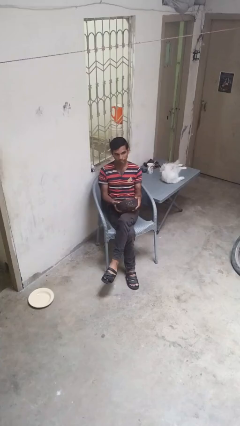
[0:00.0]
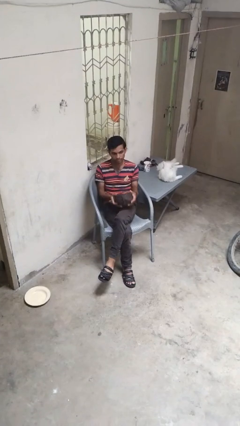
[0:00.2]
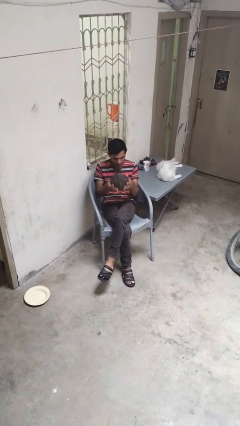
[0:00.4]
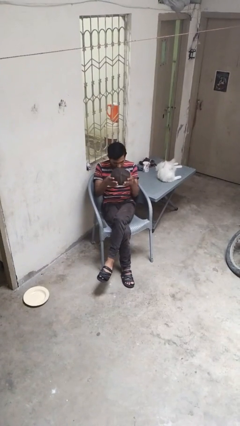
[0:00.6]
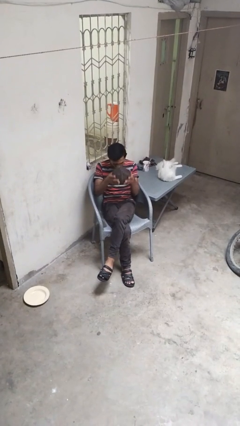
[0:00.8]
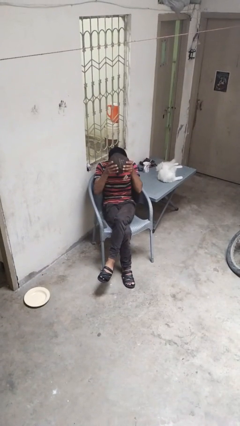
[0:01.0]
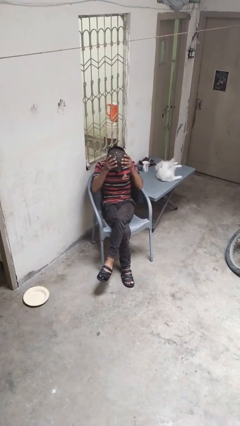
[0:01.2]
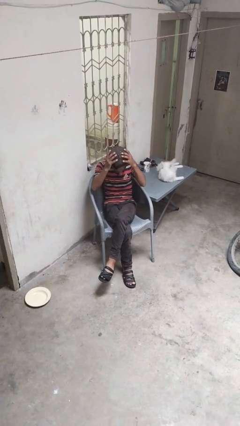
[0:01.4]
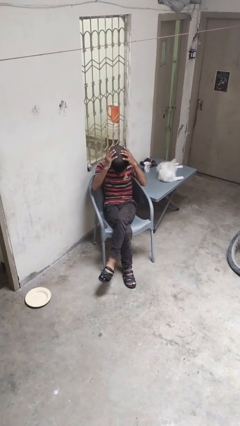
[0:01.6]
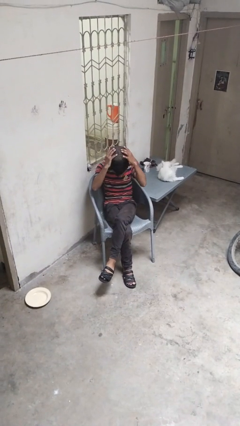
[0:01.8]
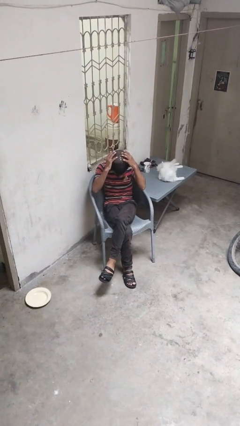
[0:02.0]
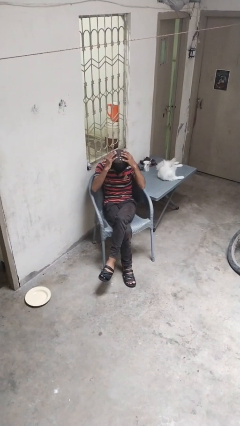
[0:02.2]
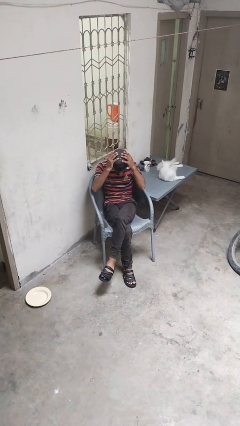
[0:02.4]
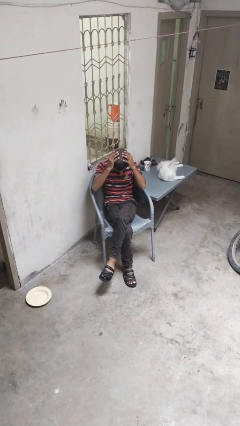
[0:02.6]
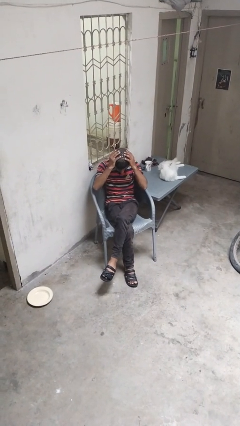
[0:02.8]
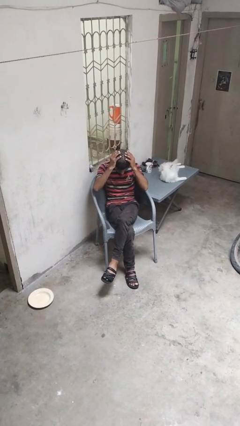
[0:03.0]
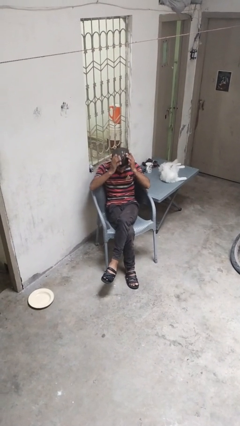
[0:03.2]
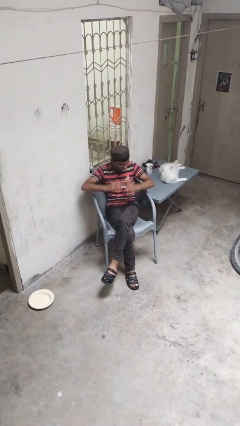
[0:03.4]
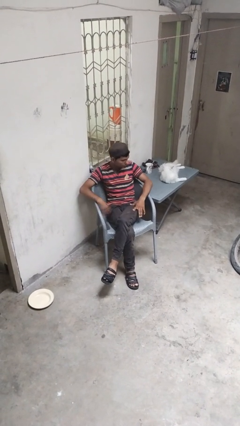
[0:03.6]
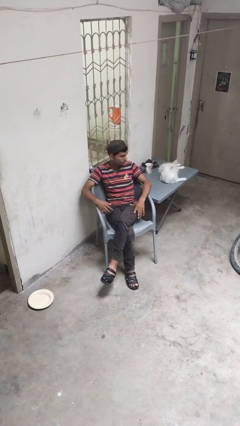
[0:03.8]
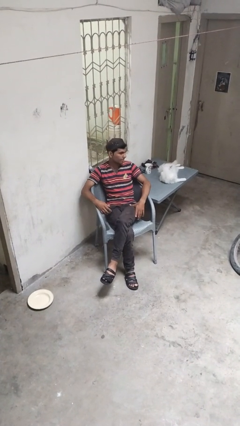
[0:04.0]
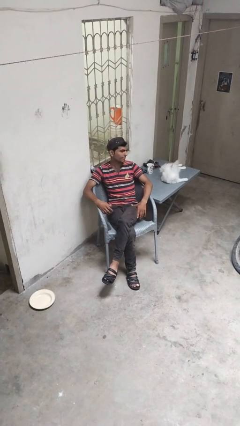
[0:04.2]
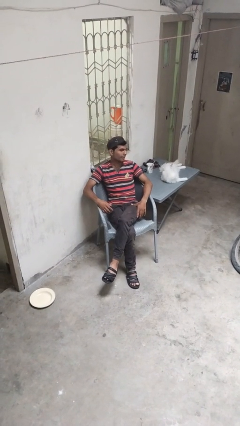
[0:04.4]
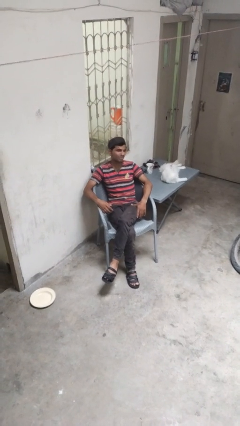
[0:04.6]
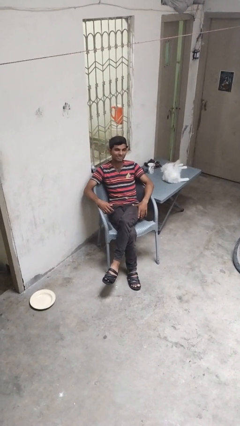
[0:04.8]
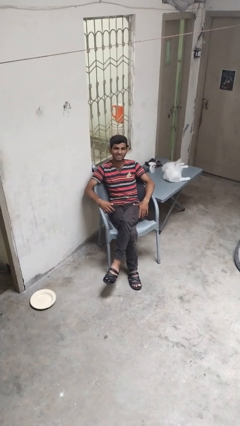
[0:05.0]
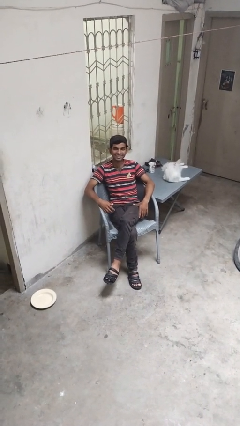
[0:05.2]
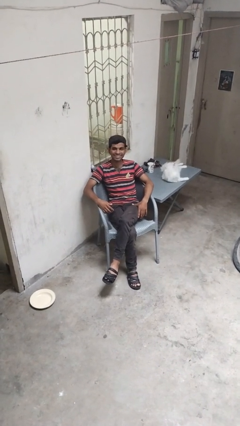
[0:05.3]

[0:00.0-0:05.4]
person puts on hat

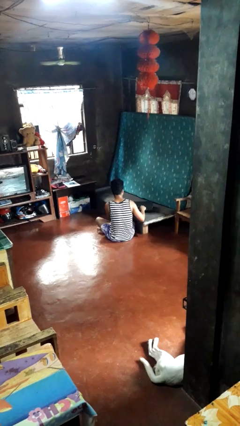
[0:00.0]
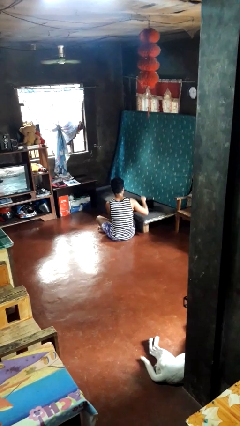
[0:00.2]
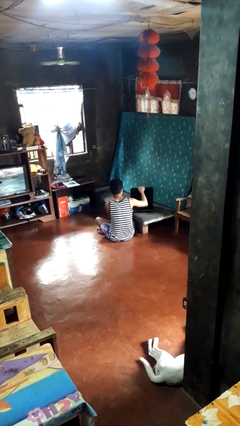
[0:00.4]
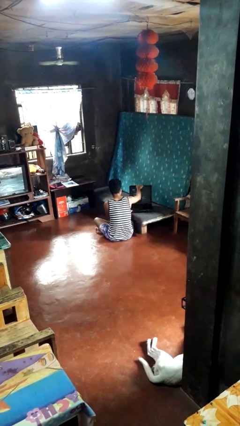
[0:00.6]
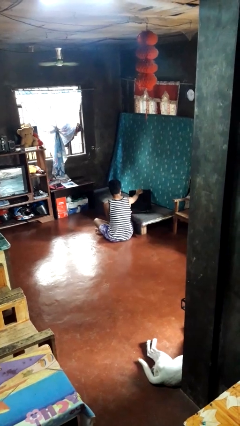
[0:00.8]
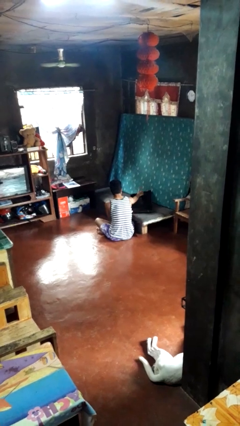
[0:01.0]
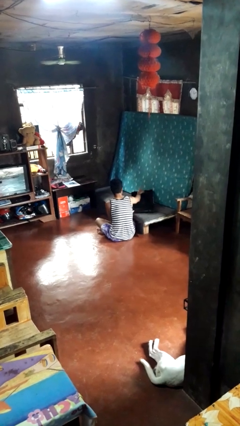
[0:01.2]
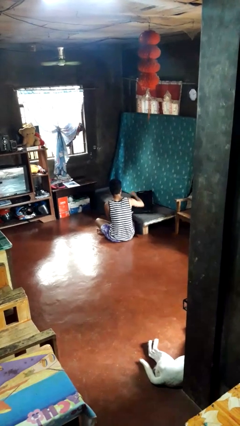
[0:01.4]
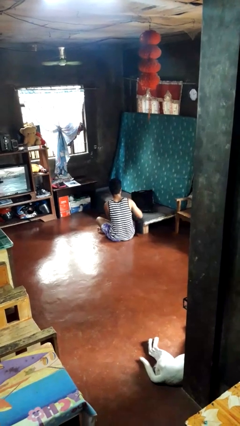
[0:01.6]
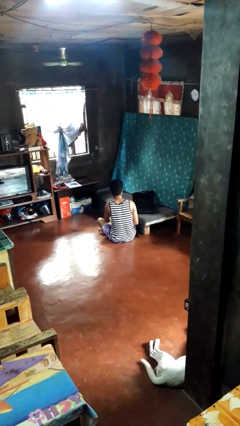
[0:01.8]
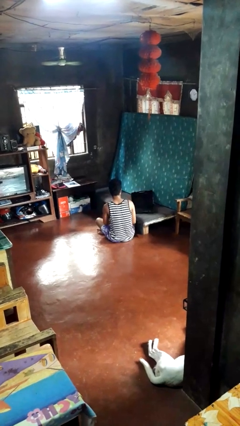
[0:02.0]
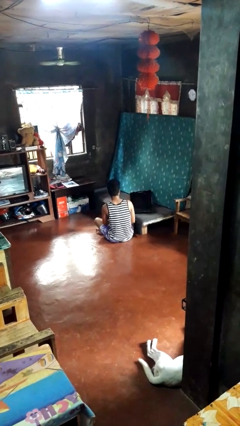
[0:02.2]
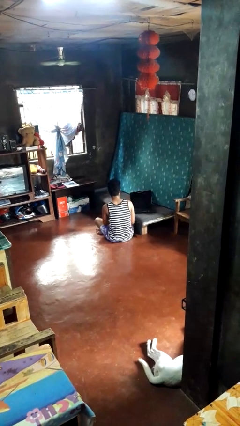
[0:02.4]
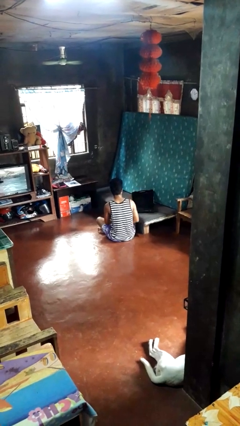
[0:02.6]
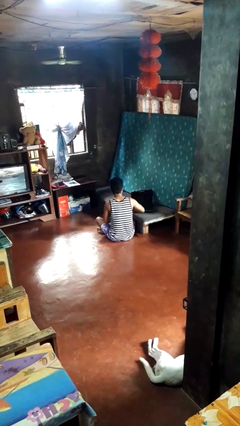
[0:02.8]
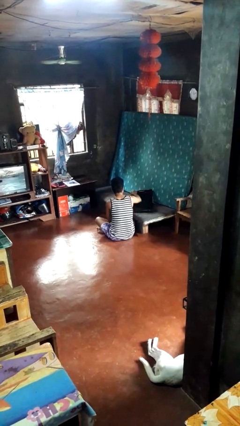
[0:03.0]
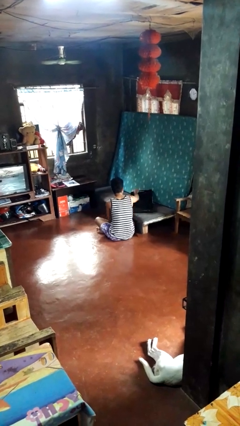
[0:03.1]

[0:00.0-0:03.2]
person opens suitcase

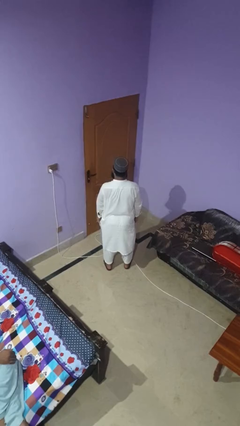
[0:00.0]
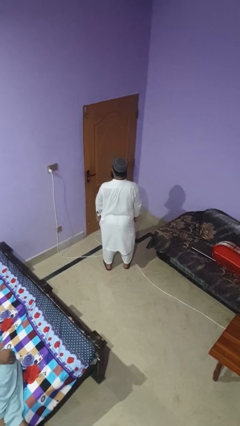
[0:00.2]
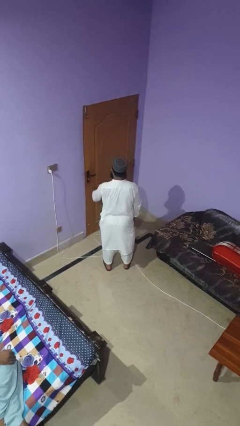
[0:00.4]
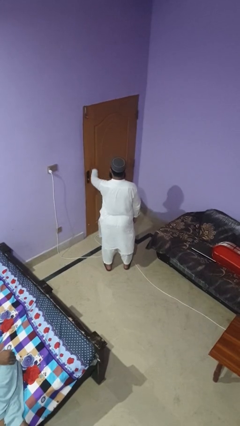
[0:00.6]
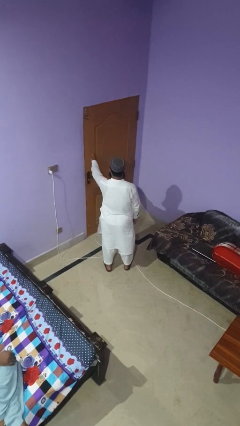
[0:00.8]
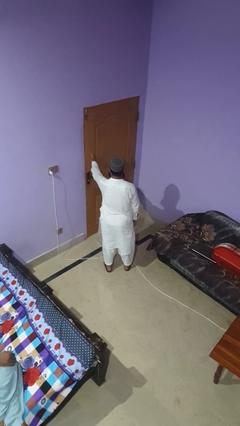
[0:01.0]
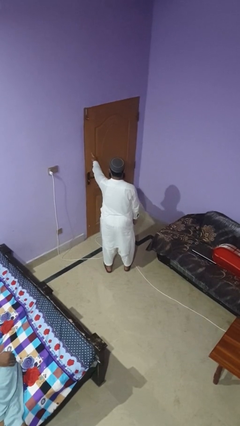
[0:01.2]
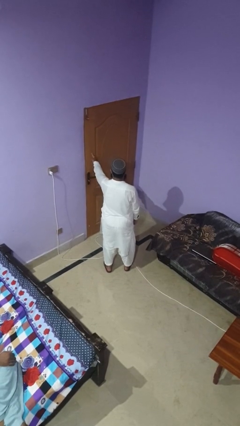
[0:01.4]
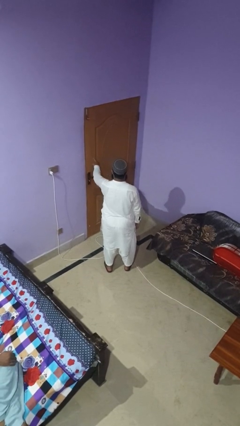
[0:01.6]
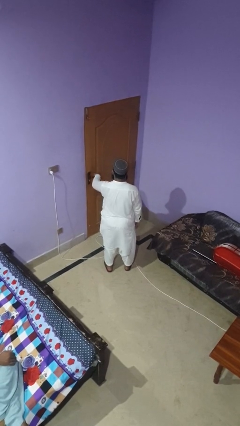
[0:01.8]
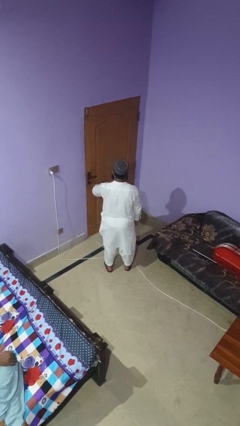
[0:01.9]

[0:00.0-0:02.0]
person taps object with finger

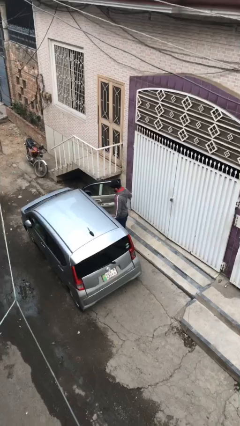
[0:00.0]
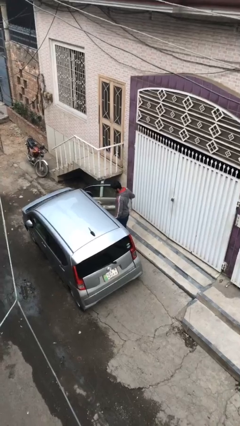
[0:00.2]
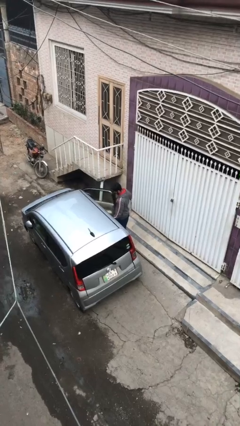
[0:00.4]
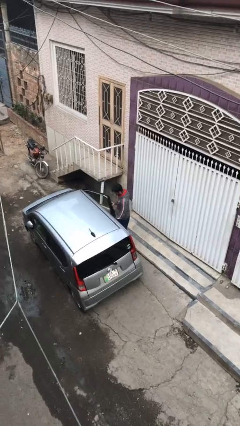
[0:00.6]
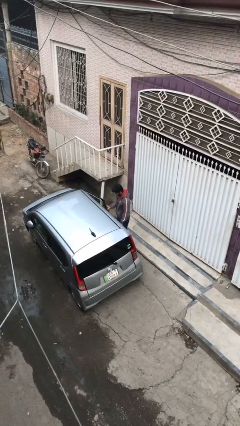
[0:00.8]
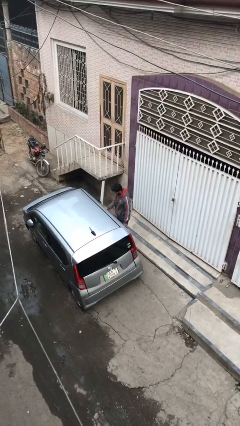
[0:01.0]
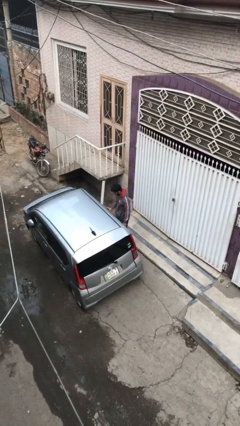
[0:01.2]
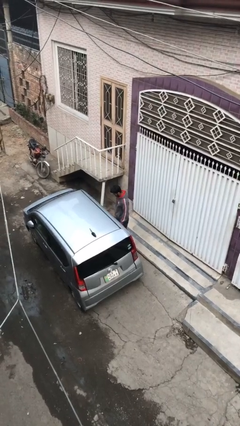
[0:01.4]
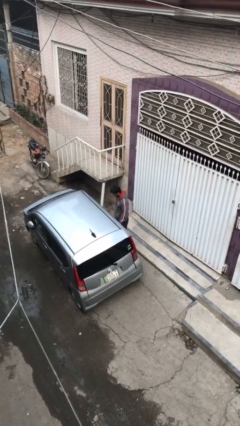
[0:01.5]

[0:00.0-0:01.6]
person closes car door

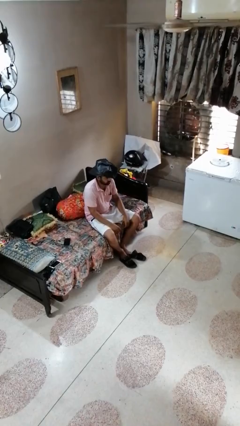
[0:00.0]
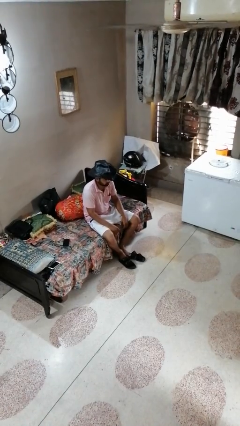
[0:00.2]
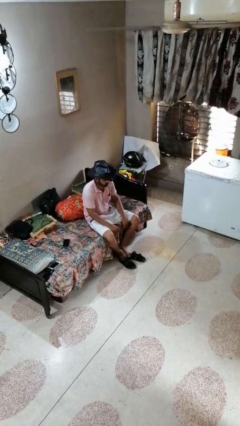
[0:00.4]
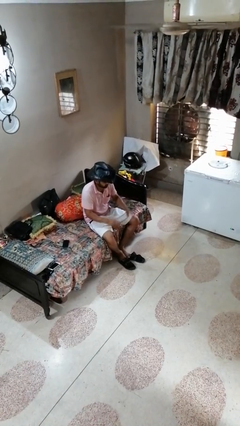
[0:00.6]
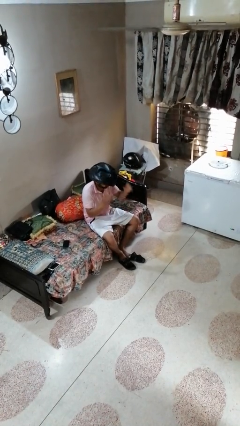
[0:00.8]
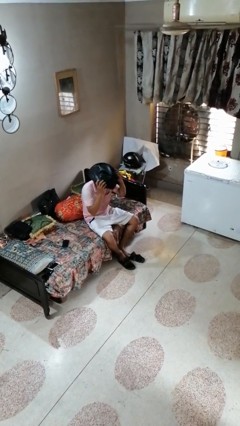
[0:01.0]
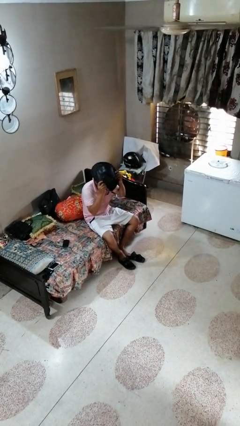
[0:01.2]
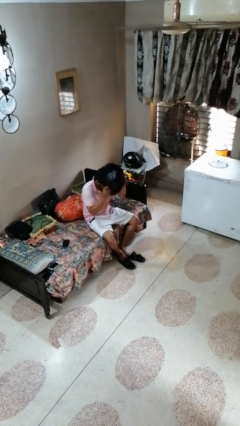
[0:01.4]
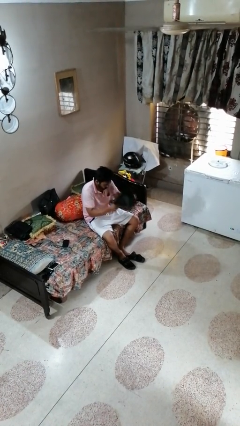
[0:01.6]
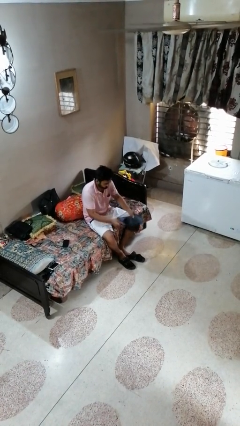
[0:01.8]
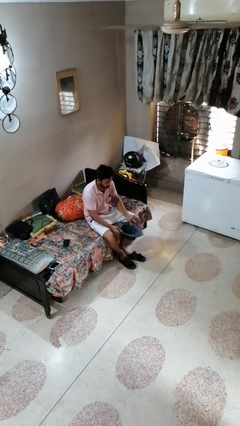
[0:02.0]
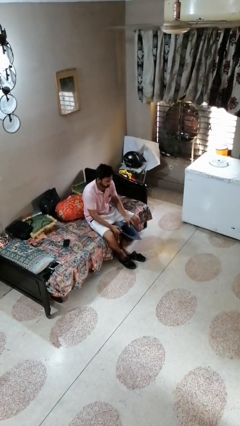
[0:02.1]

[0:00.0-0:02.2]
person takes off hat

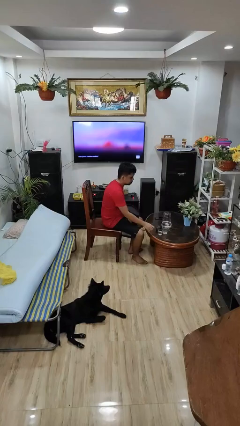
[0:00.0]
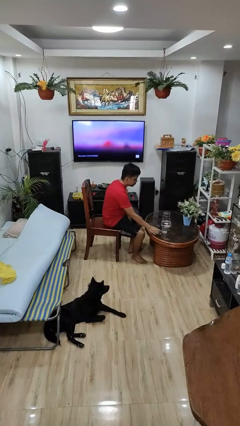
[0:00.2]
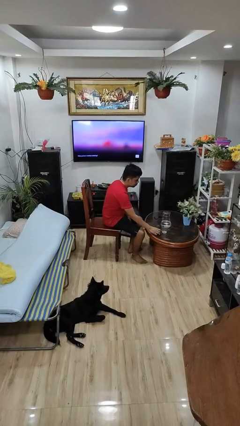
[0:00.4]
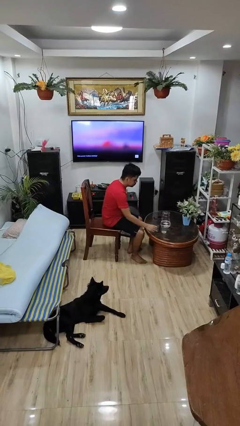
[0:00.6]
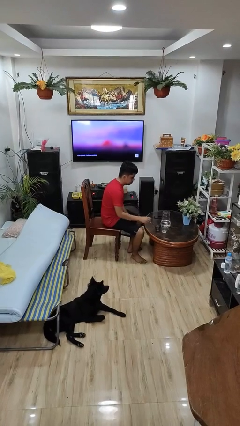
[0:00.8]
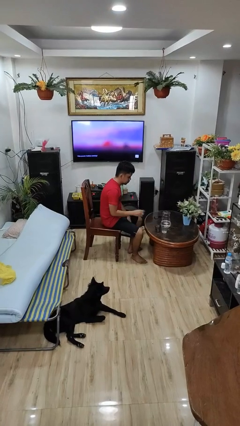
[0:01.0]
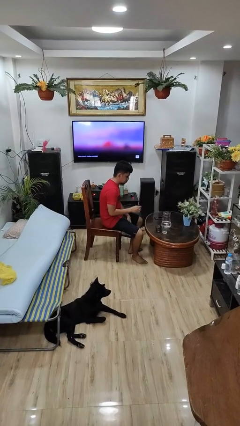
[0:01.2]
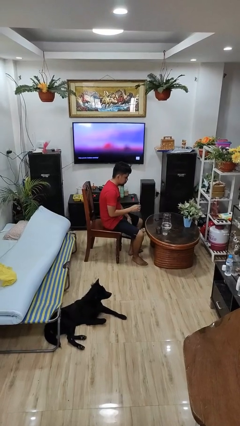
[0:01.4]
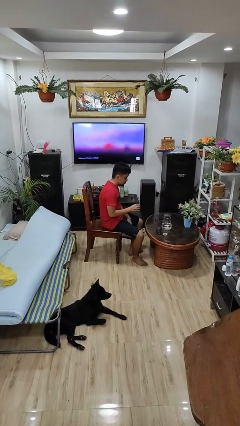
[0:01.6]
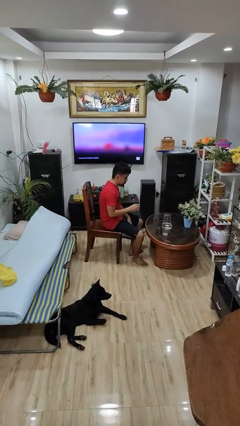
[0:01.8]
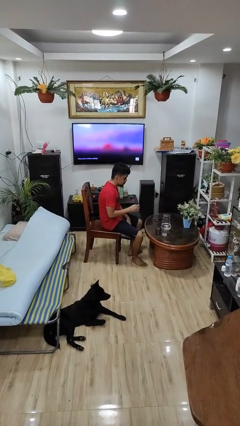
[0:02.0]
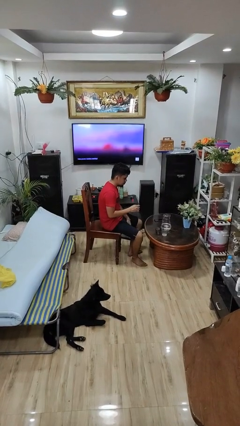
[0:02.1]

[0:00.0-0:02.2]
person picks up object from table

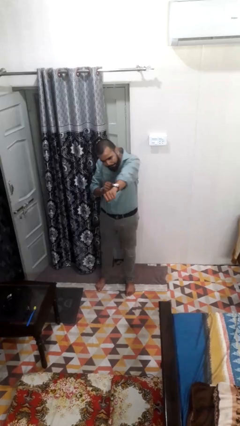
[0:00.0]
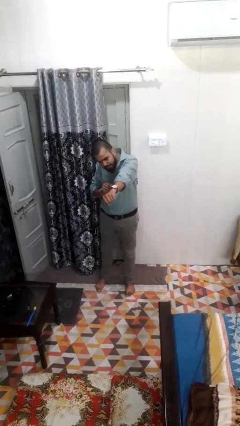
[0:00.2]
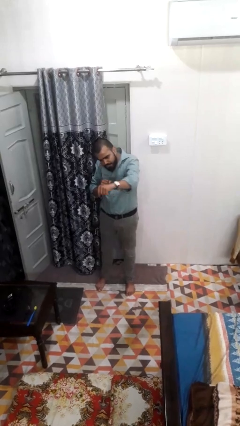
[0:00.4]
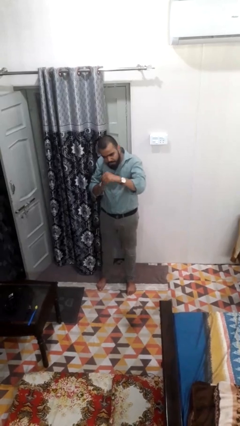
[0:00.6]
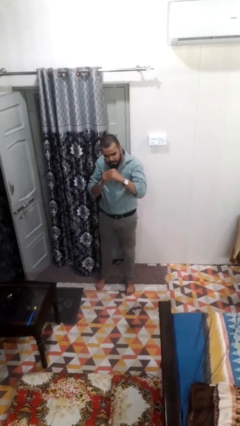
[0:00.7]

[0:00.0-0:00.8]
person punches
